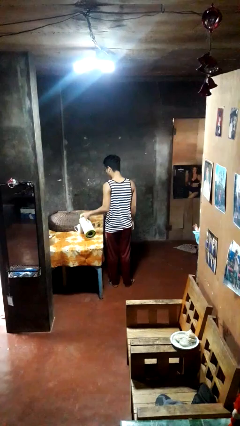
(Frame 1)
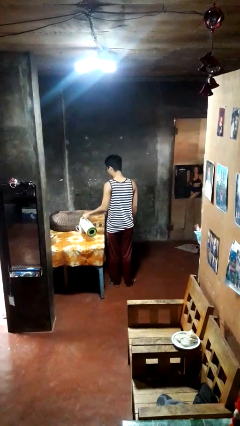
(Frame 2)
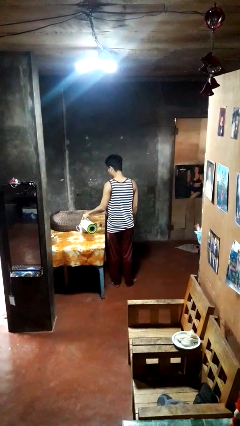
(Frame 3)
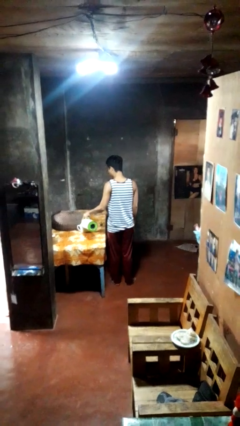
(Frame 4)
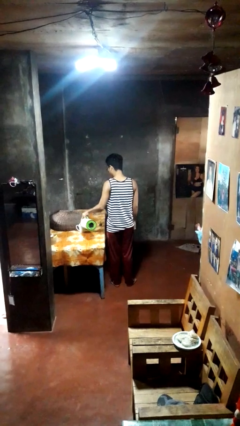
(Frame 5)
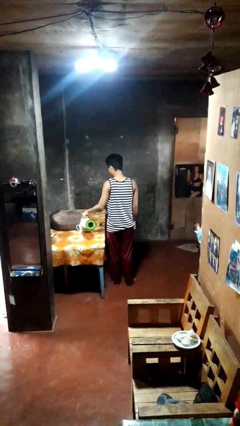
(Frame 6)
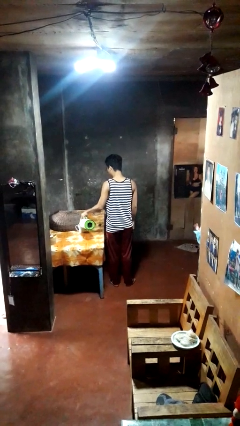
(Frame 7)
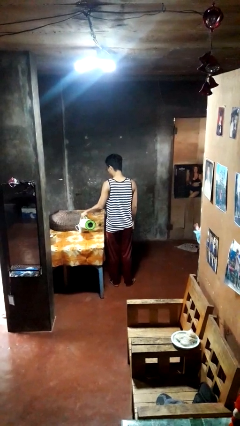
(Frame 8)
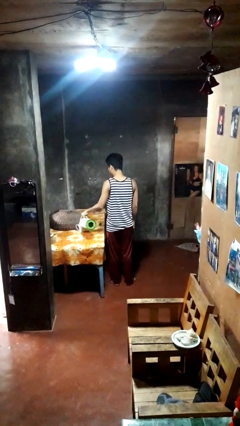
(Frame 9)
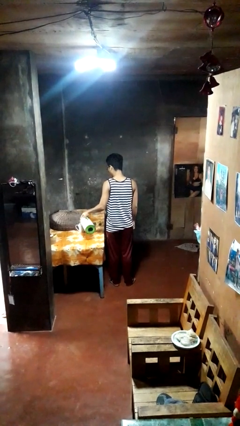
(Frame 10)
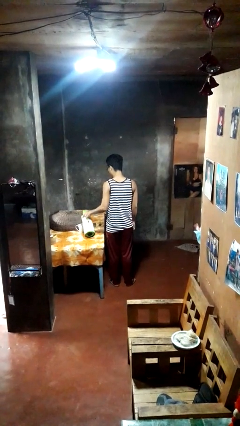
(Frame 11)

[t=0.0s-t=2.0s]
person pours coffee into mug

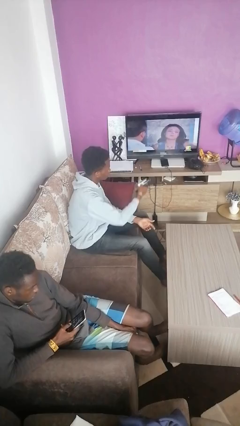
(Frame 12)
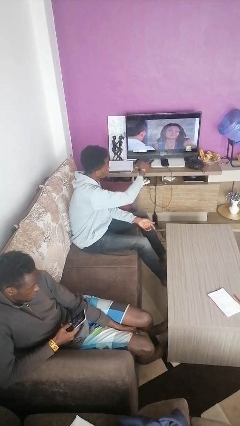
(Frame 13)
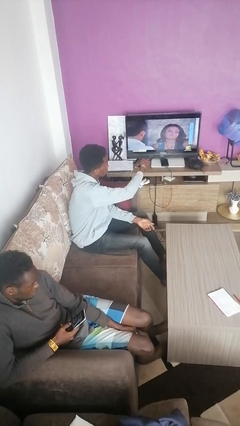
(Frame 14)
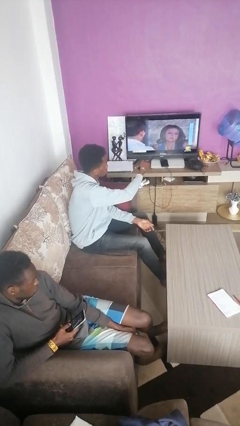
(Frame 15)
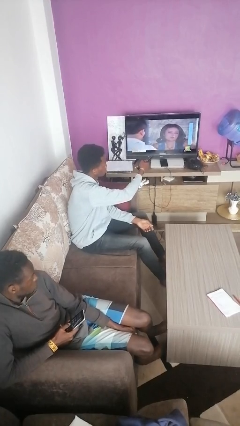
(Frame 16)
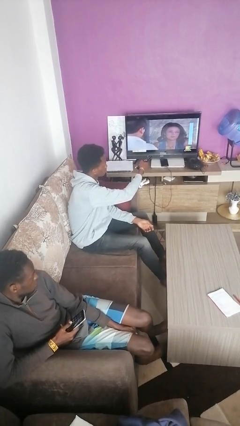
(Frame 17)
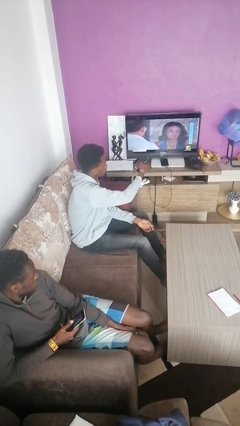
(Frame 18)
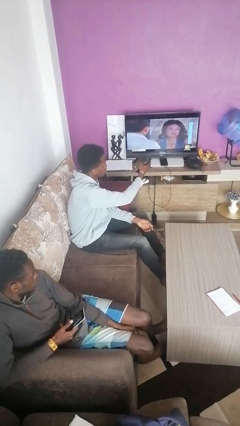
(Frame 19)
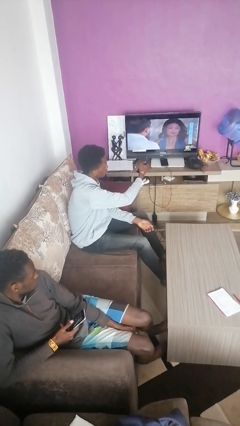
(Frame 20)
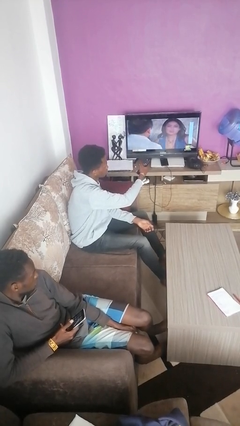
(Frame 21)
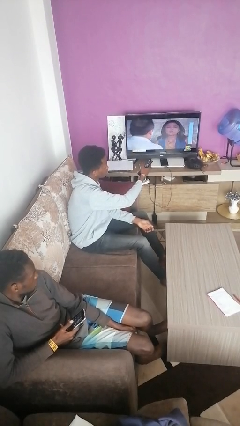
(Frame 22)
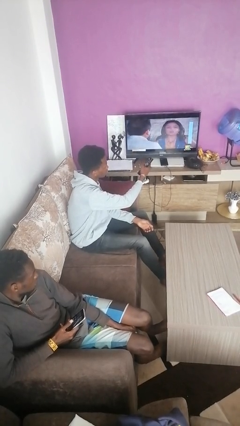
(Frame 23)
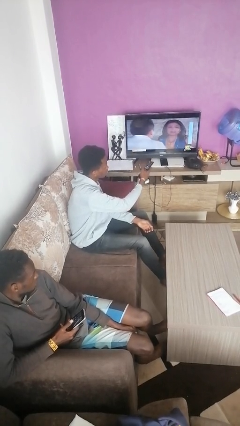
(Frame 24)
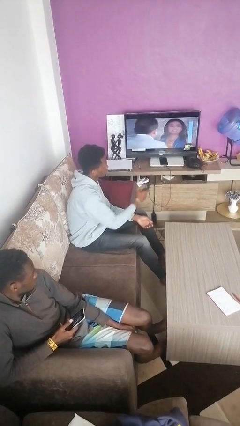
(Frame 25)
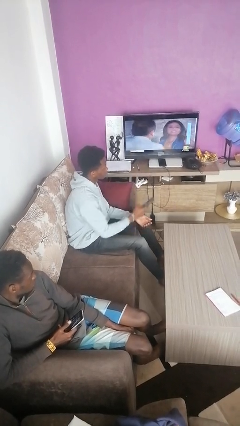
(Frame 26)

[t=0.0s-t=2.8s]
person uses television remote

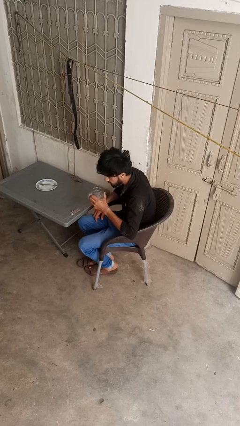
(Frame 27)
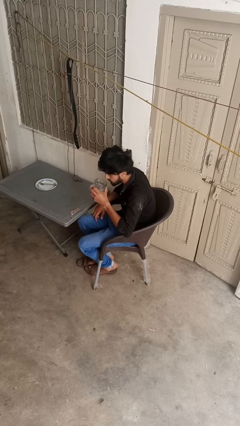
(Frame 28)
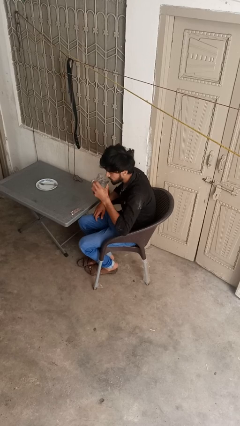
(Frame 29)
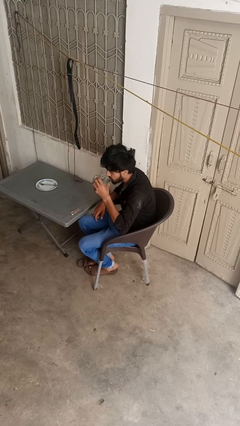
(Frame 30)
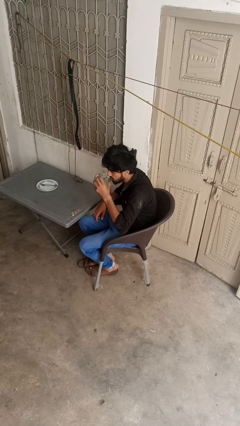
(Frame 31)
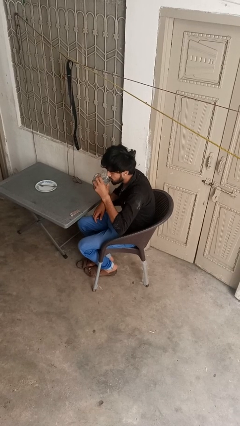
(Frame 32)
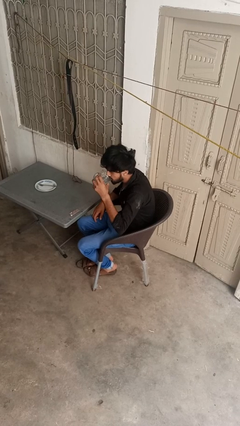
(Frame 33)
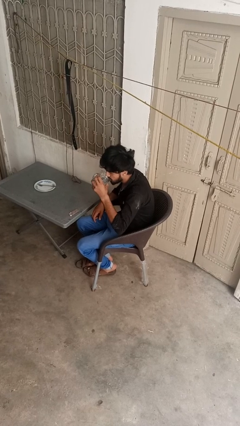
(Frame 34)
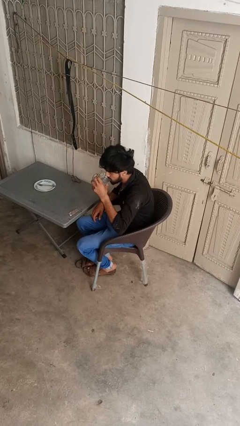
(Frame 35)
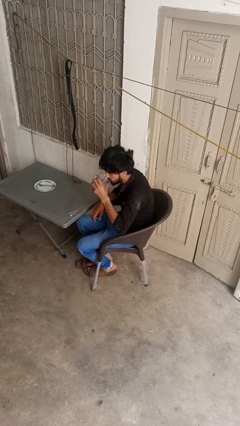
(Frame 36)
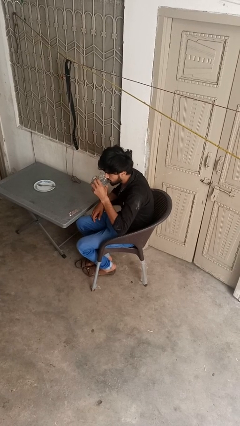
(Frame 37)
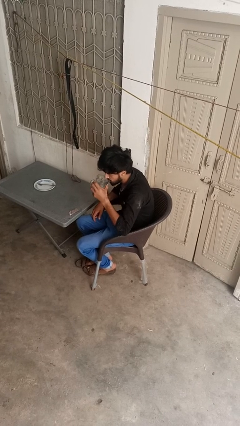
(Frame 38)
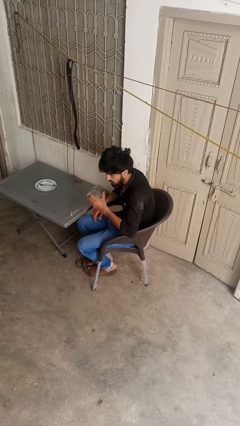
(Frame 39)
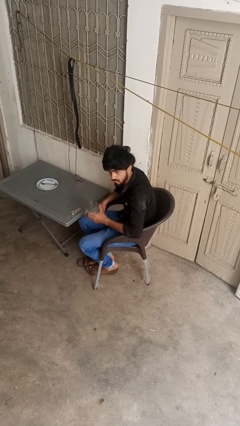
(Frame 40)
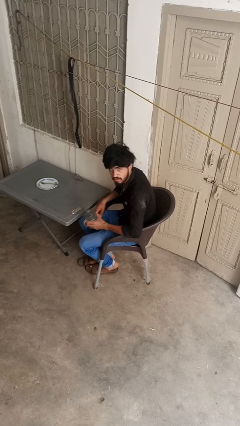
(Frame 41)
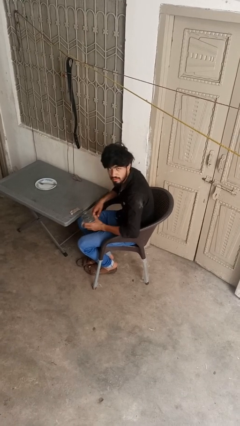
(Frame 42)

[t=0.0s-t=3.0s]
person drinks from cup

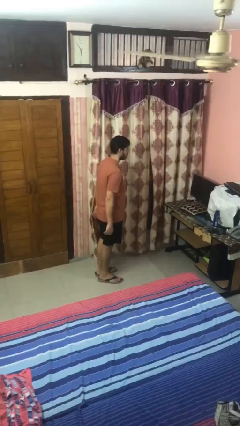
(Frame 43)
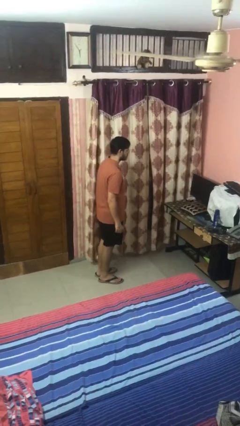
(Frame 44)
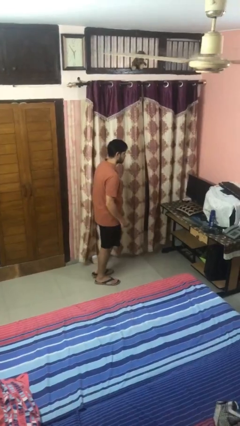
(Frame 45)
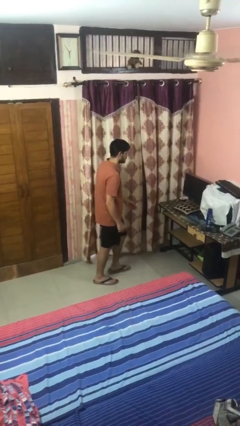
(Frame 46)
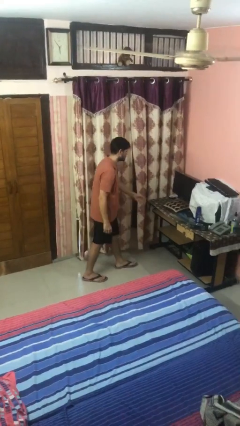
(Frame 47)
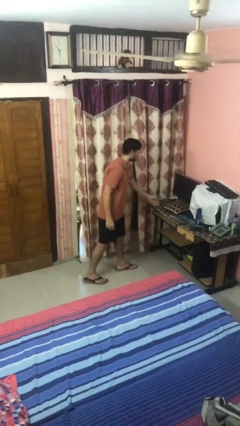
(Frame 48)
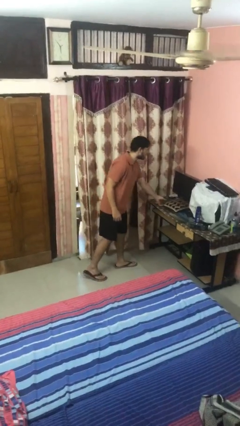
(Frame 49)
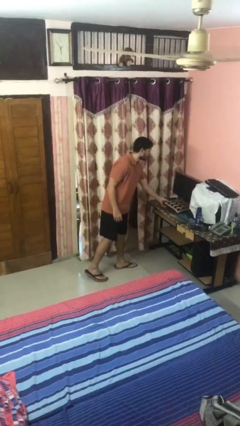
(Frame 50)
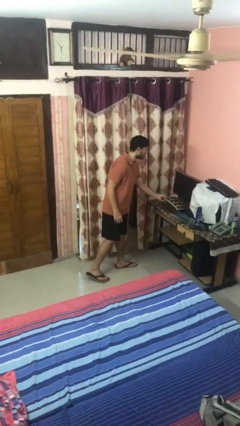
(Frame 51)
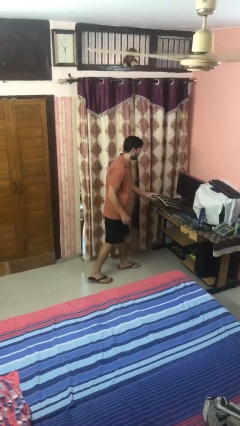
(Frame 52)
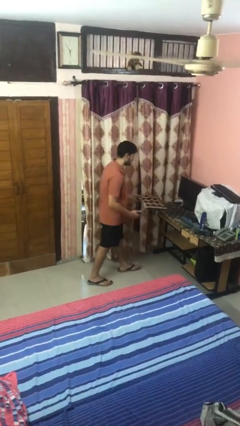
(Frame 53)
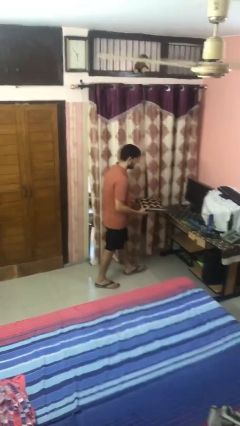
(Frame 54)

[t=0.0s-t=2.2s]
person picks up object from table

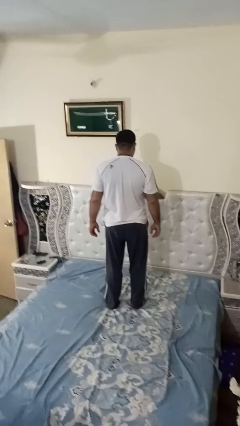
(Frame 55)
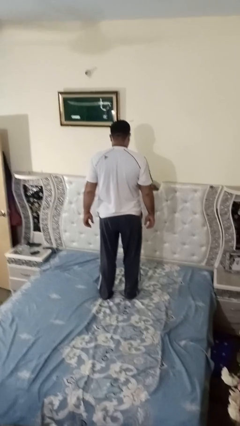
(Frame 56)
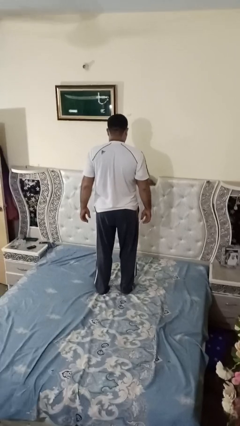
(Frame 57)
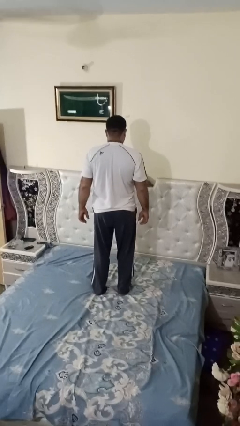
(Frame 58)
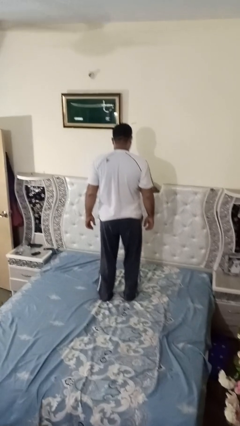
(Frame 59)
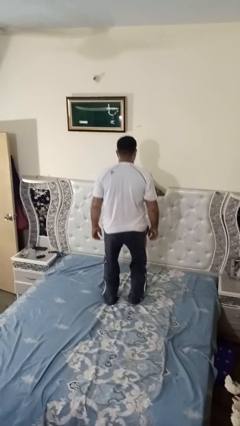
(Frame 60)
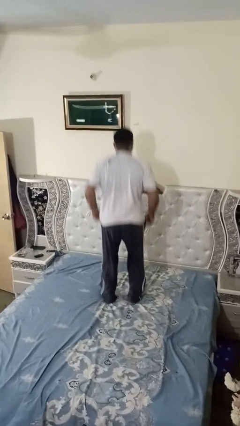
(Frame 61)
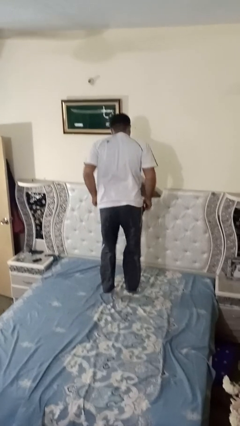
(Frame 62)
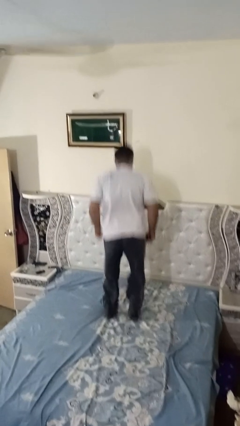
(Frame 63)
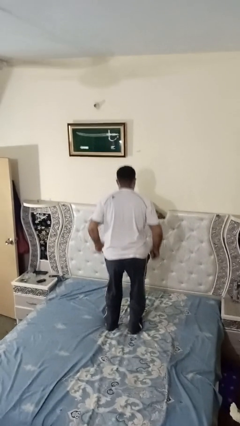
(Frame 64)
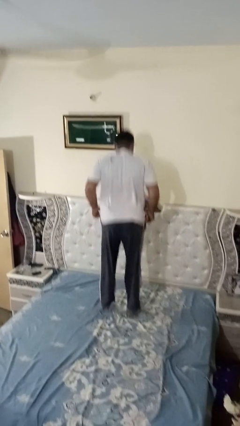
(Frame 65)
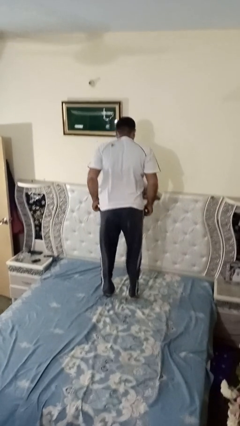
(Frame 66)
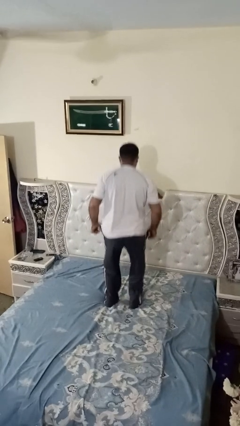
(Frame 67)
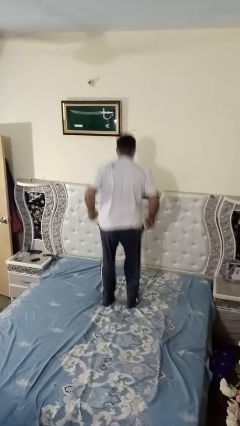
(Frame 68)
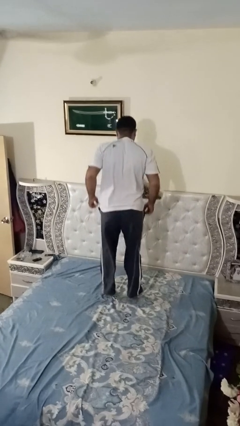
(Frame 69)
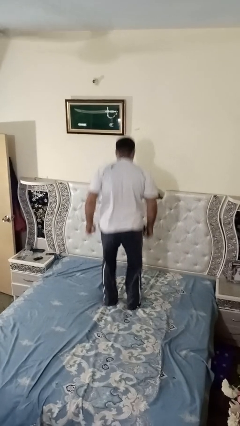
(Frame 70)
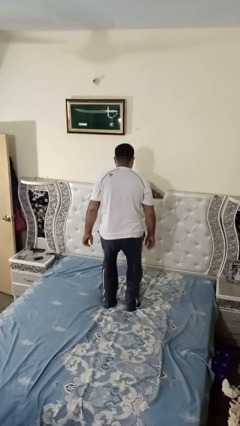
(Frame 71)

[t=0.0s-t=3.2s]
person jumps on bed

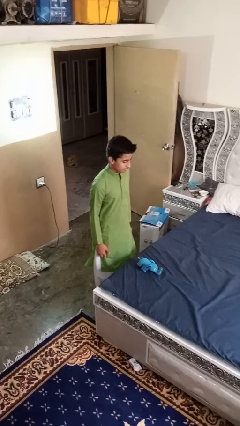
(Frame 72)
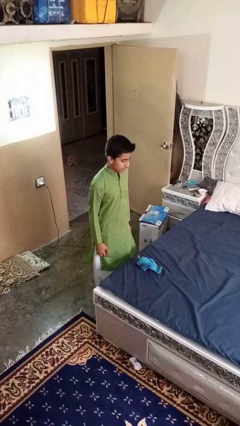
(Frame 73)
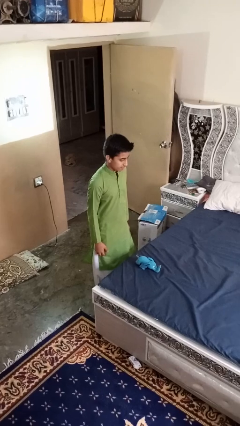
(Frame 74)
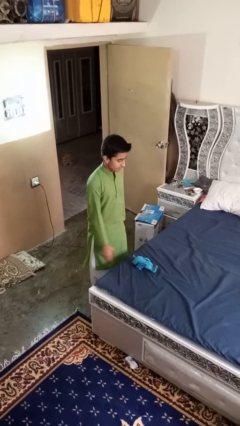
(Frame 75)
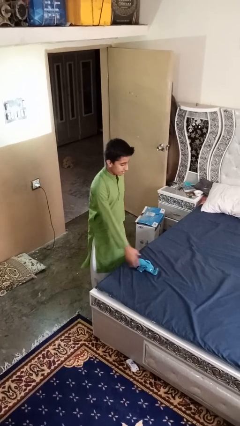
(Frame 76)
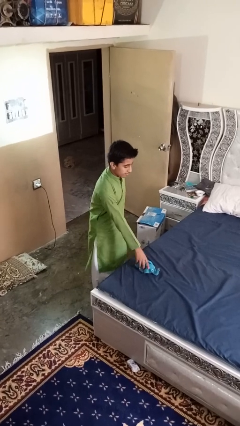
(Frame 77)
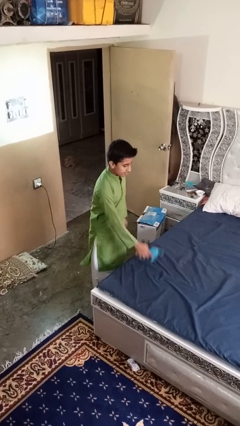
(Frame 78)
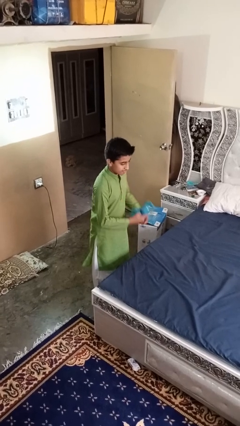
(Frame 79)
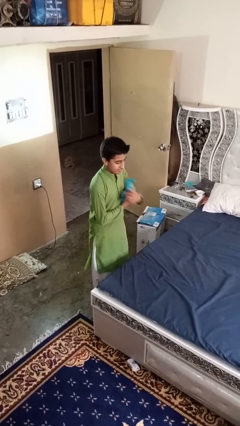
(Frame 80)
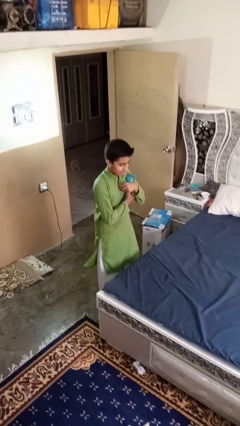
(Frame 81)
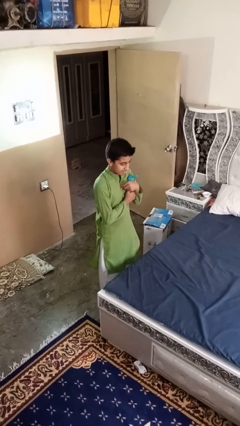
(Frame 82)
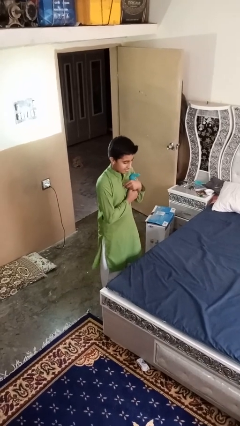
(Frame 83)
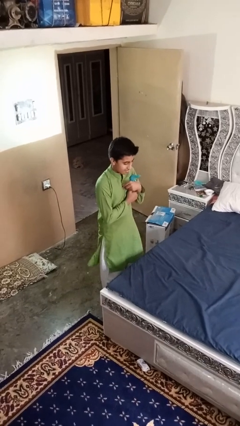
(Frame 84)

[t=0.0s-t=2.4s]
person hugs stuffed animal

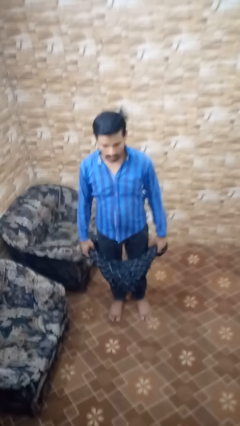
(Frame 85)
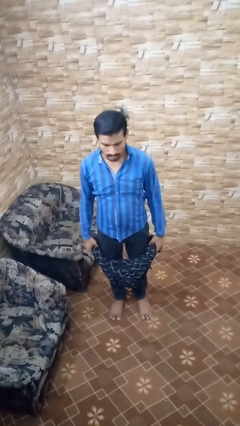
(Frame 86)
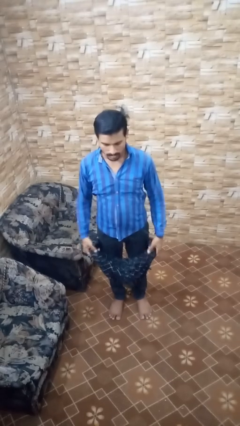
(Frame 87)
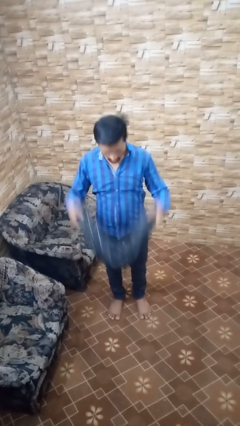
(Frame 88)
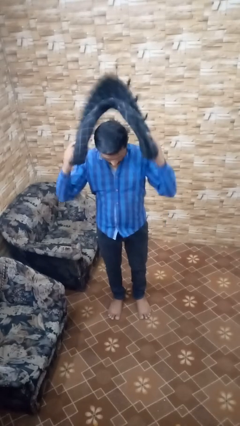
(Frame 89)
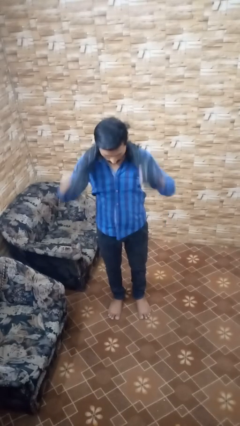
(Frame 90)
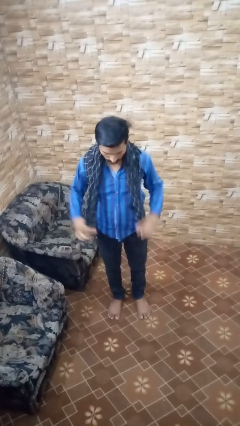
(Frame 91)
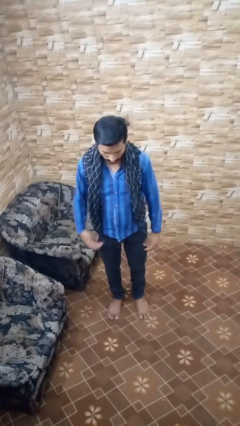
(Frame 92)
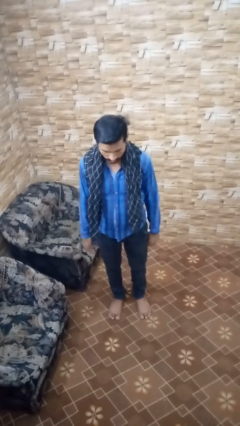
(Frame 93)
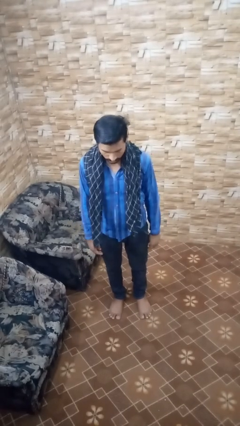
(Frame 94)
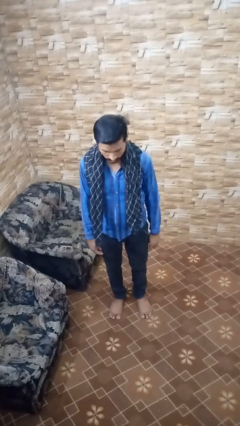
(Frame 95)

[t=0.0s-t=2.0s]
person puts on scarf
